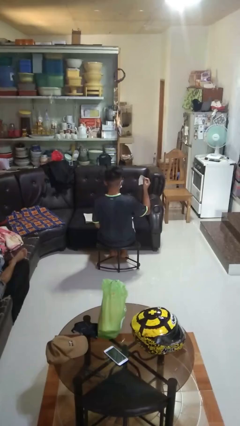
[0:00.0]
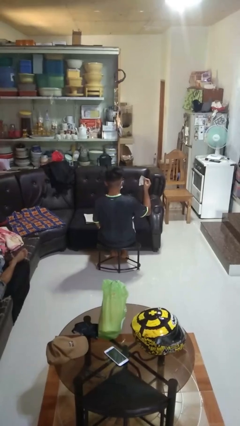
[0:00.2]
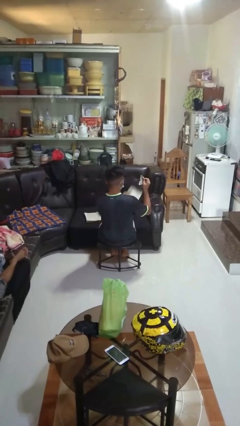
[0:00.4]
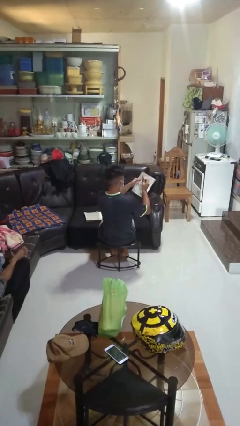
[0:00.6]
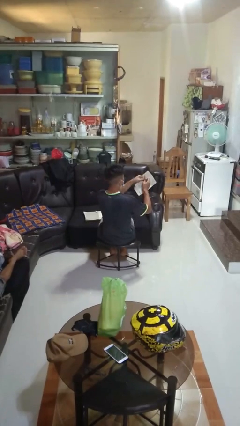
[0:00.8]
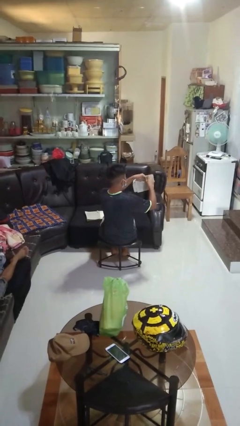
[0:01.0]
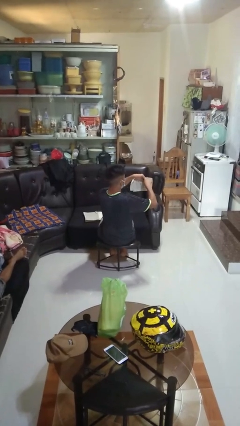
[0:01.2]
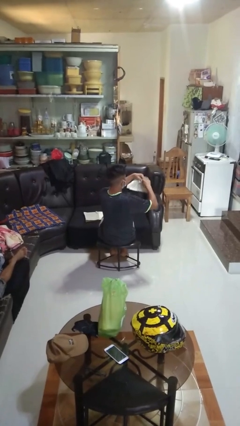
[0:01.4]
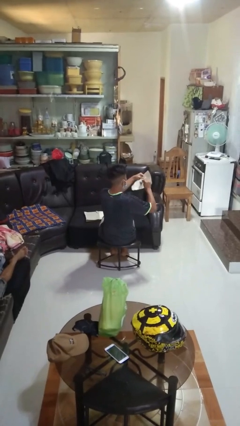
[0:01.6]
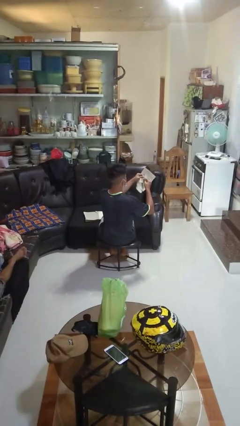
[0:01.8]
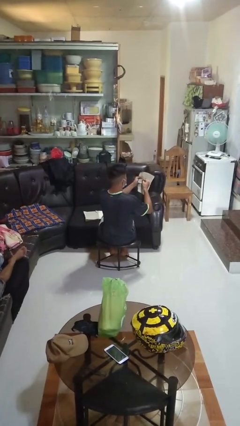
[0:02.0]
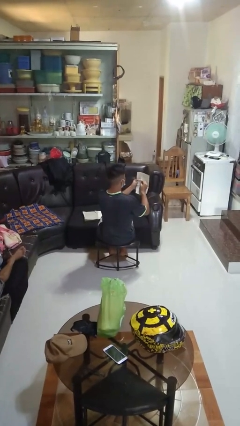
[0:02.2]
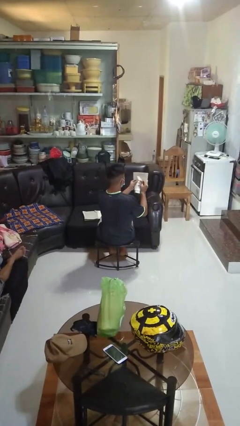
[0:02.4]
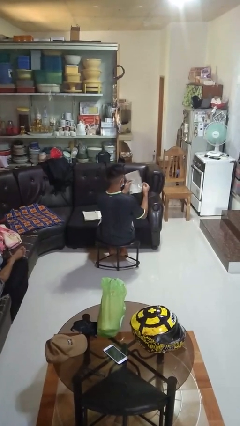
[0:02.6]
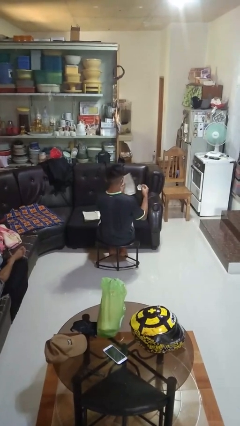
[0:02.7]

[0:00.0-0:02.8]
person tears paper

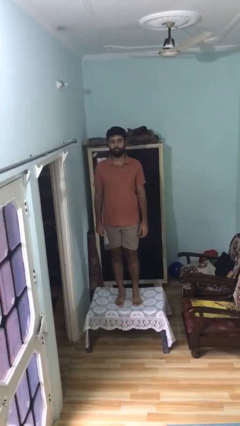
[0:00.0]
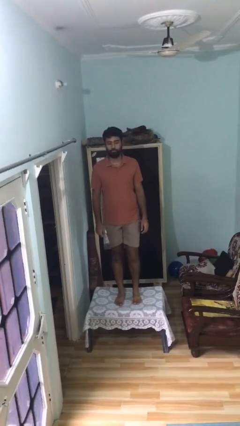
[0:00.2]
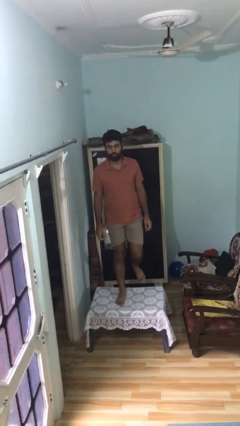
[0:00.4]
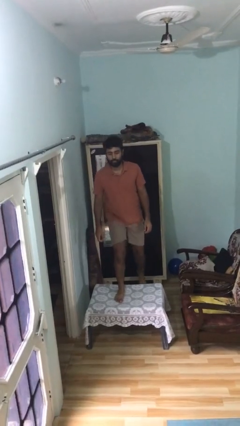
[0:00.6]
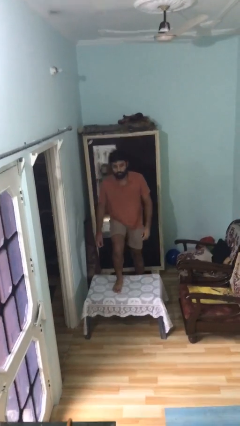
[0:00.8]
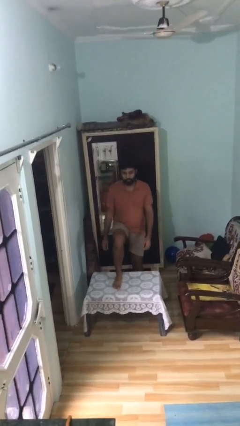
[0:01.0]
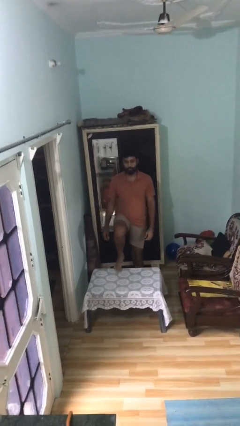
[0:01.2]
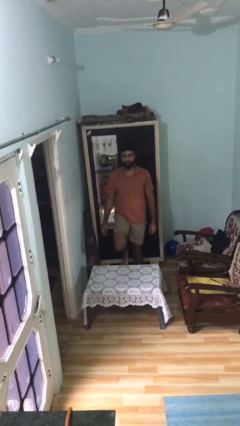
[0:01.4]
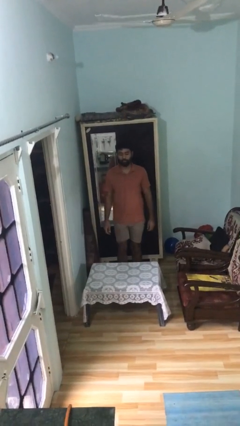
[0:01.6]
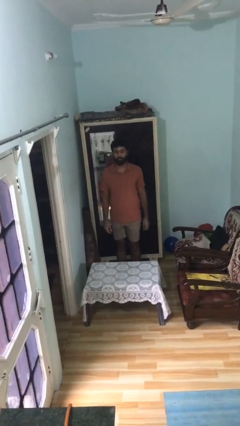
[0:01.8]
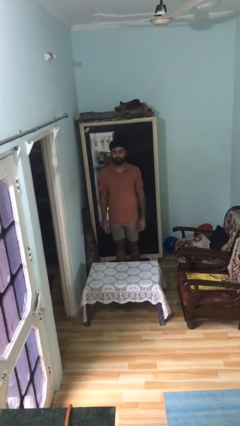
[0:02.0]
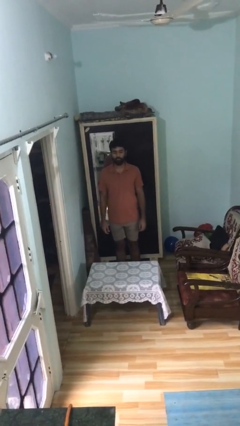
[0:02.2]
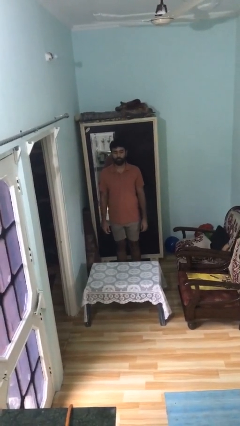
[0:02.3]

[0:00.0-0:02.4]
person climbs off table

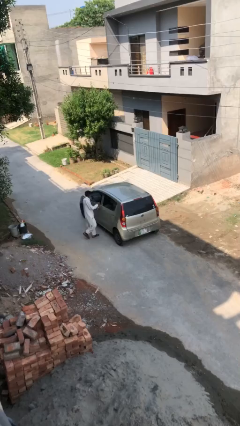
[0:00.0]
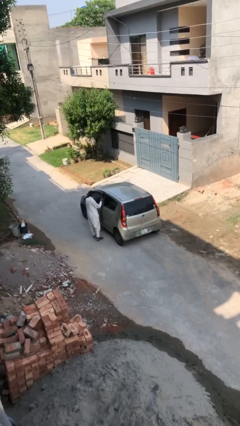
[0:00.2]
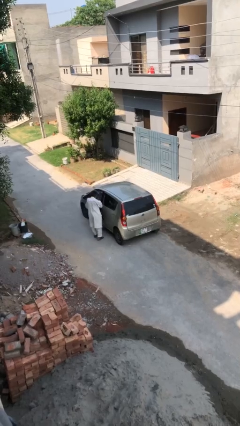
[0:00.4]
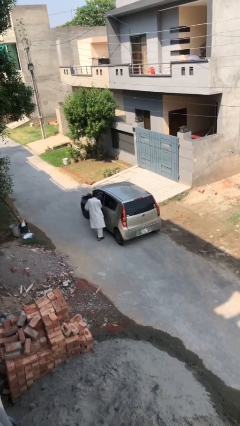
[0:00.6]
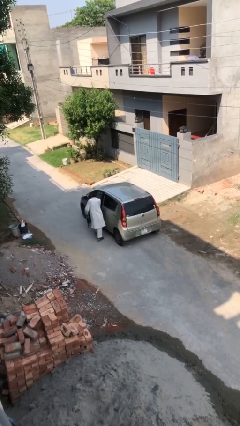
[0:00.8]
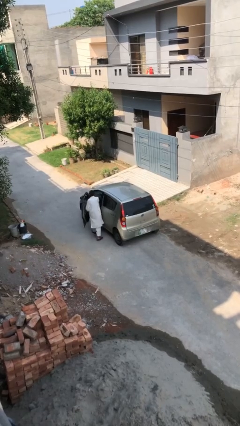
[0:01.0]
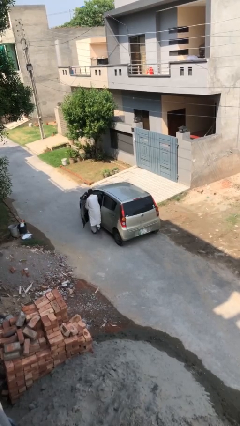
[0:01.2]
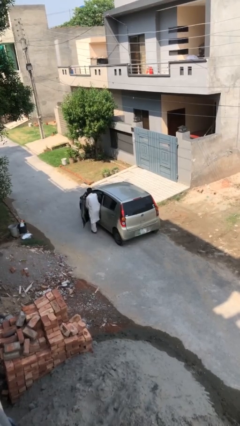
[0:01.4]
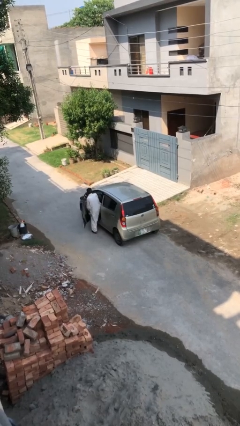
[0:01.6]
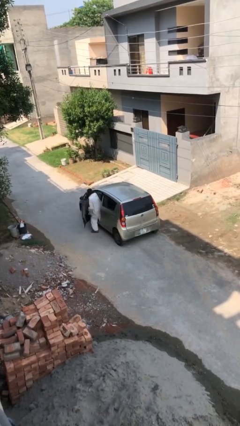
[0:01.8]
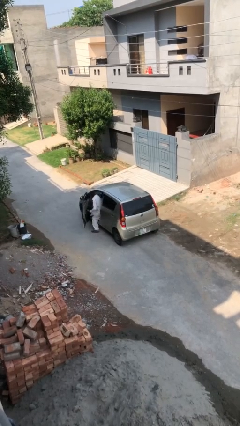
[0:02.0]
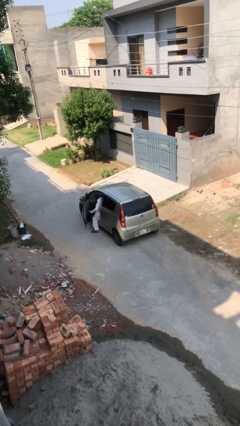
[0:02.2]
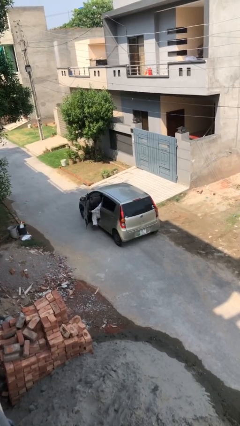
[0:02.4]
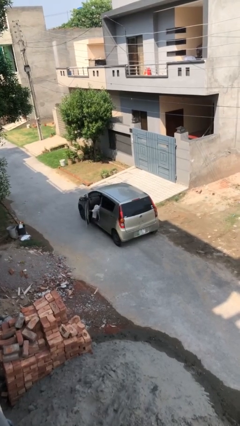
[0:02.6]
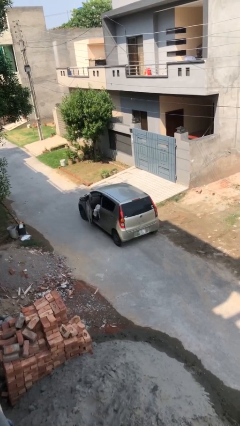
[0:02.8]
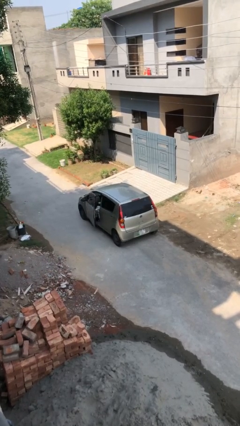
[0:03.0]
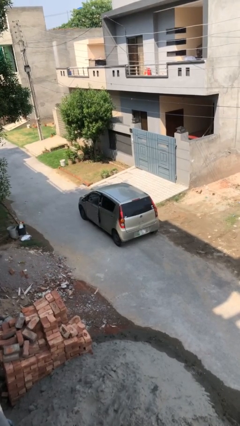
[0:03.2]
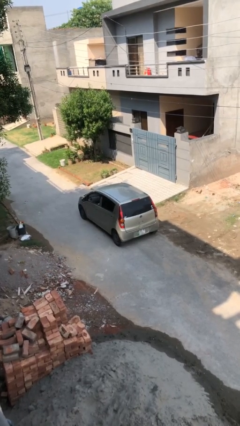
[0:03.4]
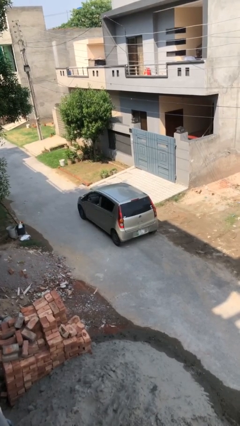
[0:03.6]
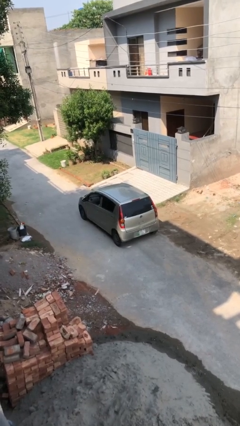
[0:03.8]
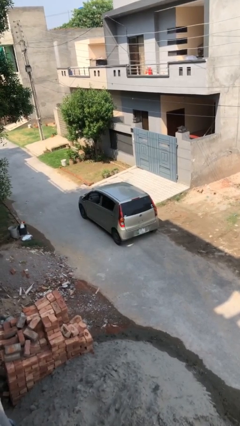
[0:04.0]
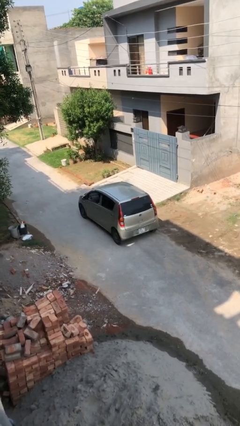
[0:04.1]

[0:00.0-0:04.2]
car picks up person

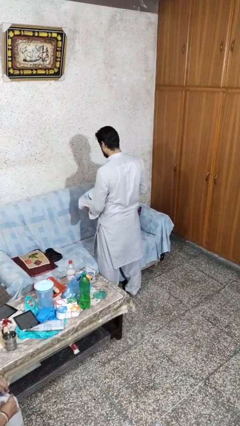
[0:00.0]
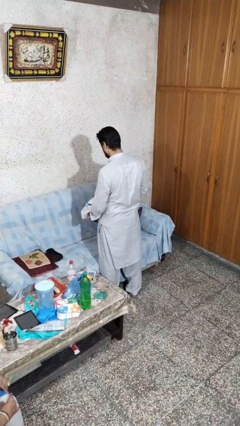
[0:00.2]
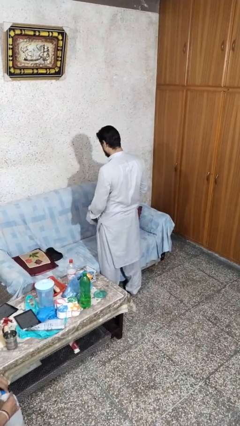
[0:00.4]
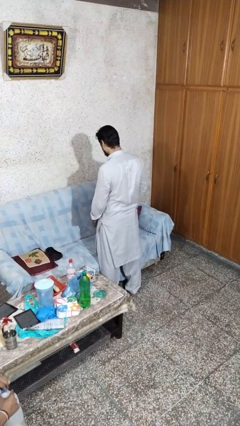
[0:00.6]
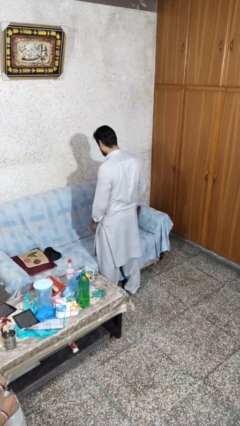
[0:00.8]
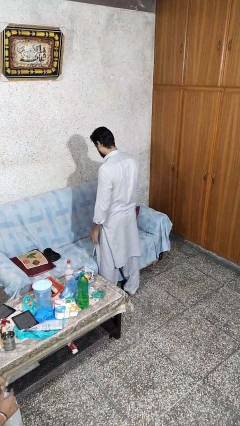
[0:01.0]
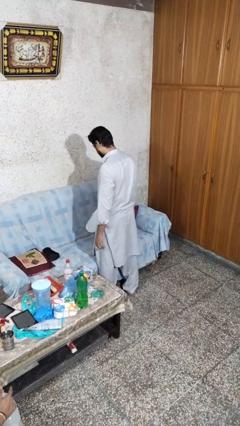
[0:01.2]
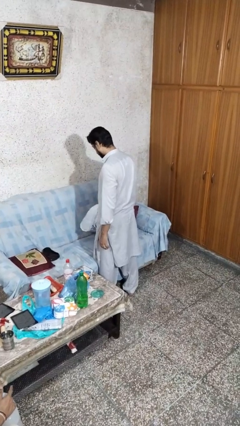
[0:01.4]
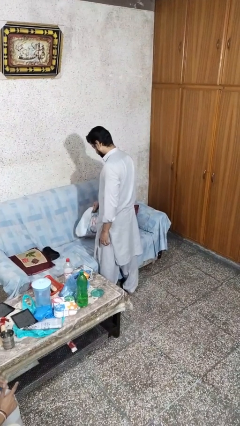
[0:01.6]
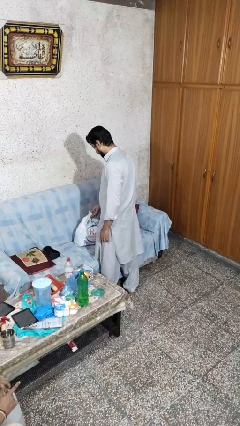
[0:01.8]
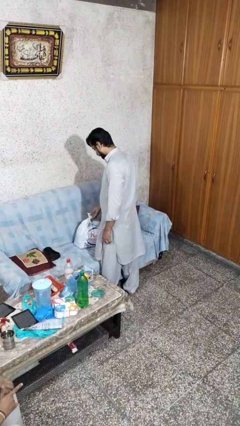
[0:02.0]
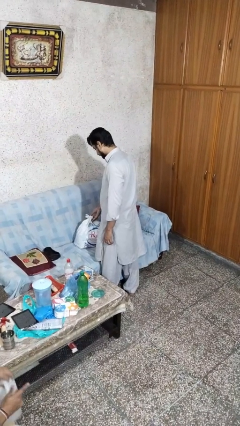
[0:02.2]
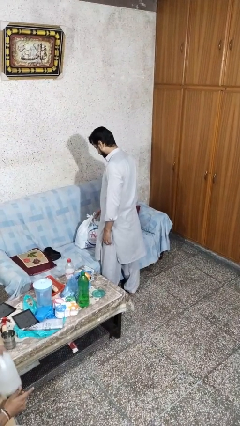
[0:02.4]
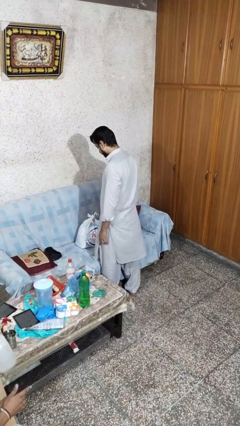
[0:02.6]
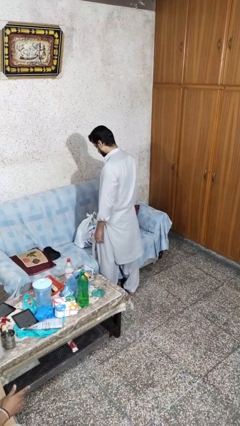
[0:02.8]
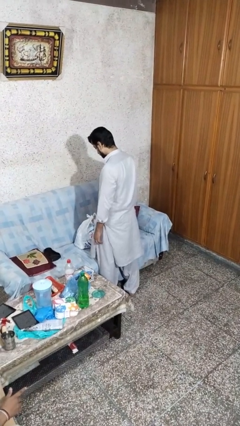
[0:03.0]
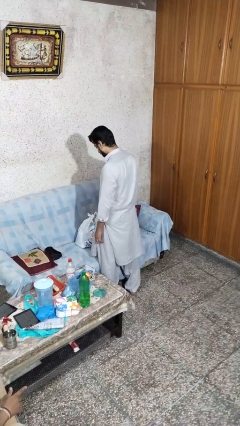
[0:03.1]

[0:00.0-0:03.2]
person puts down object on couch

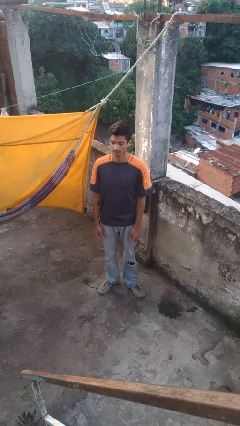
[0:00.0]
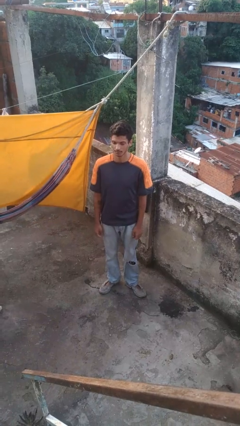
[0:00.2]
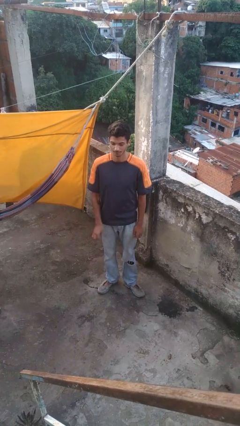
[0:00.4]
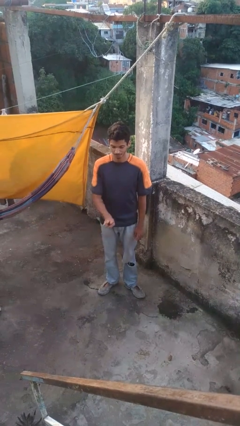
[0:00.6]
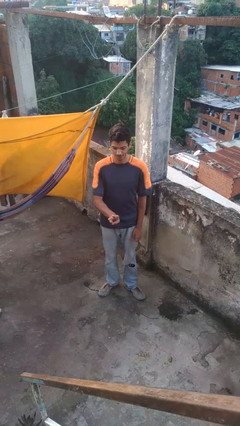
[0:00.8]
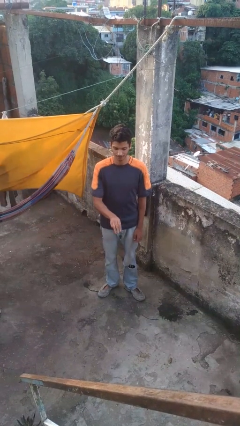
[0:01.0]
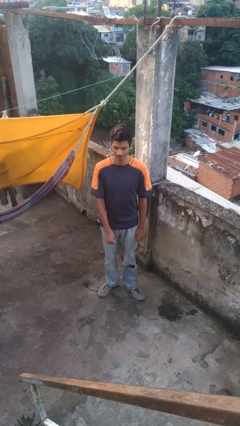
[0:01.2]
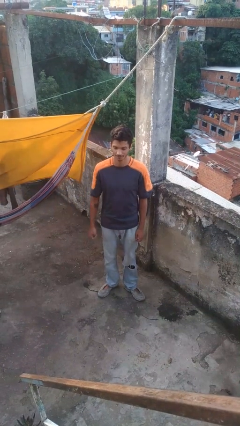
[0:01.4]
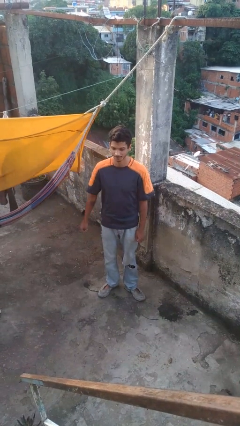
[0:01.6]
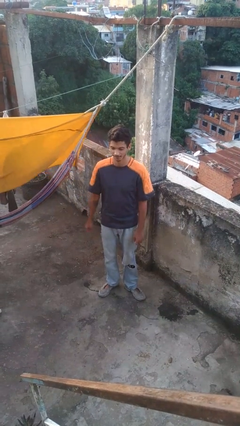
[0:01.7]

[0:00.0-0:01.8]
person gestures number three

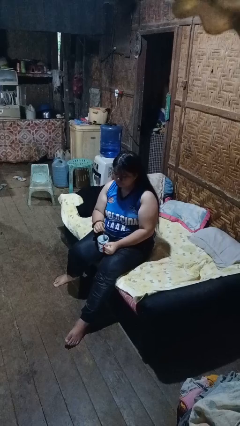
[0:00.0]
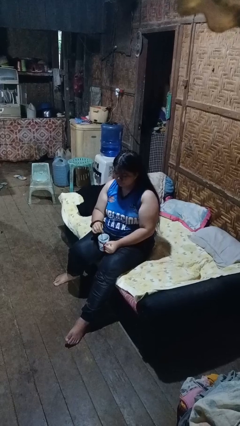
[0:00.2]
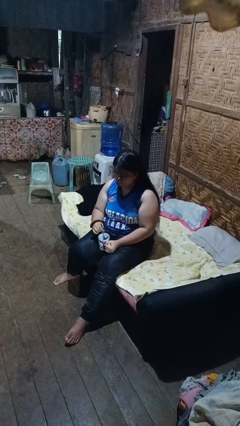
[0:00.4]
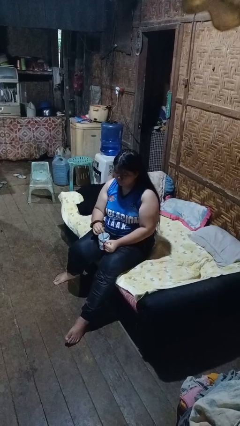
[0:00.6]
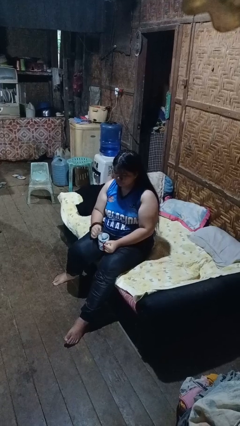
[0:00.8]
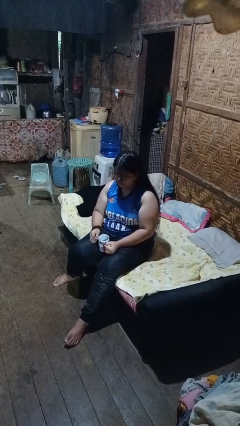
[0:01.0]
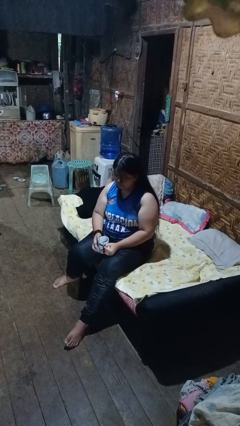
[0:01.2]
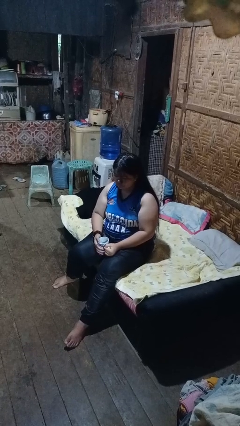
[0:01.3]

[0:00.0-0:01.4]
person stirs mug

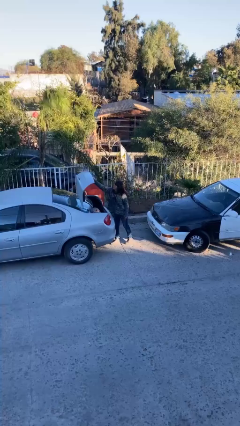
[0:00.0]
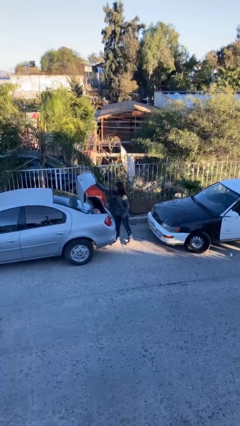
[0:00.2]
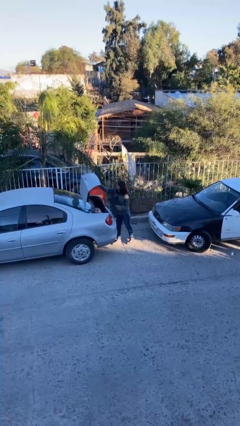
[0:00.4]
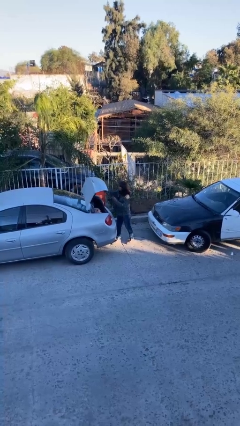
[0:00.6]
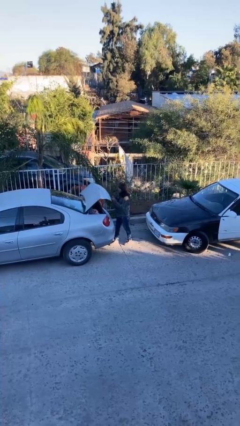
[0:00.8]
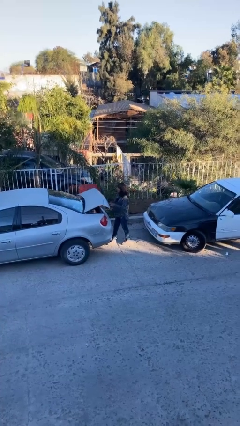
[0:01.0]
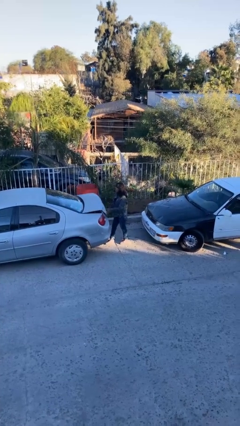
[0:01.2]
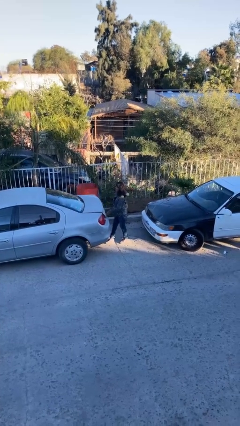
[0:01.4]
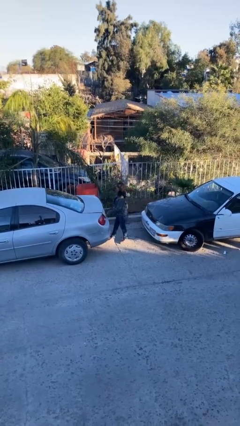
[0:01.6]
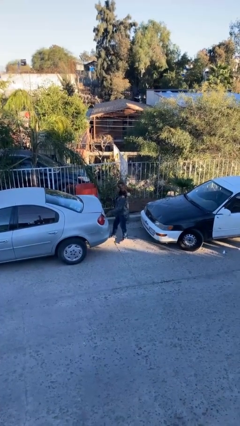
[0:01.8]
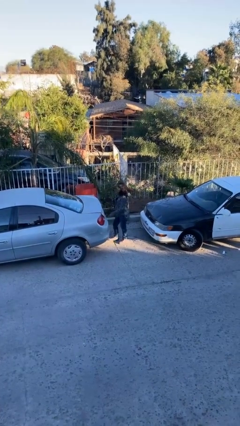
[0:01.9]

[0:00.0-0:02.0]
person closes car trunk
